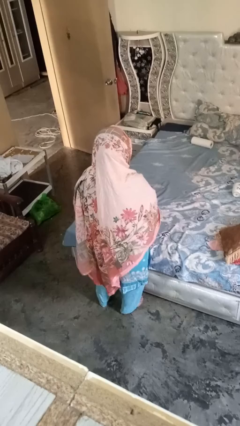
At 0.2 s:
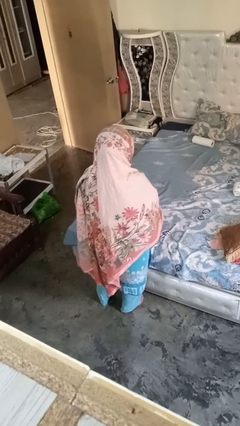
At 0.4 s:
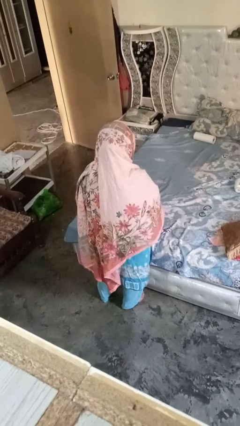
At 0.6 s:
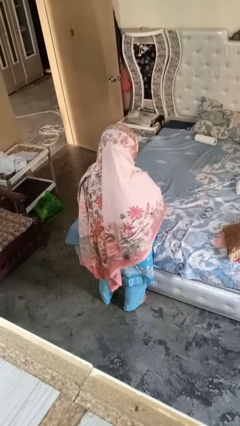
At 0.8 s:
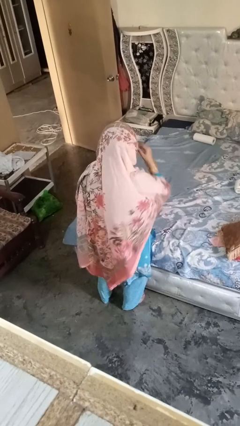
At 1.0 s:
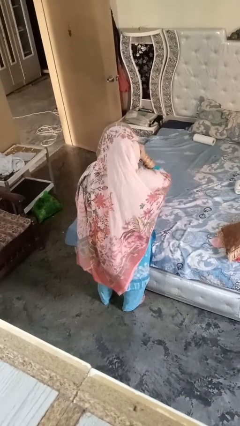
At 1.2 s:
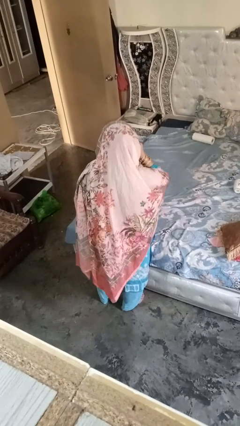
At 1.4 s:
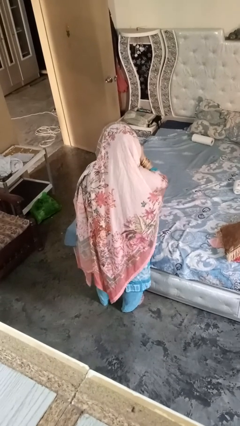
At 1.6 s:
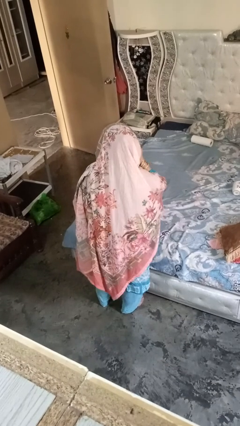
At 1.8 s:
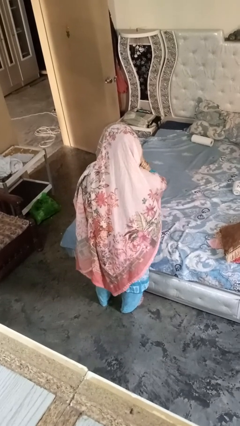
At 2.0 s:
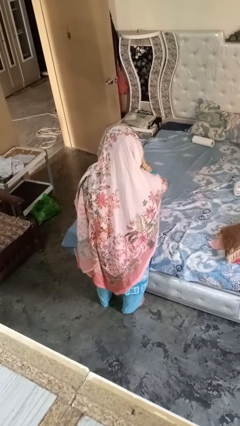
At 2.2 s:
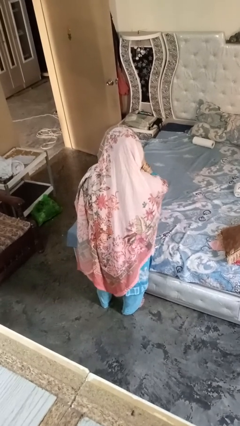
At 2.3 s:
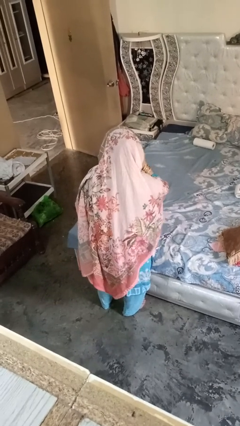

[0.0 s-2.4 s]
person gestures listen closely

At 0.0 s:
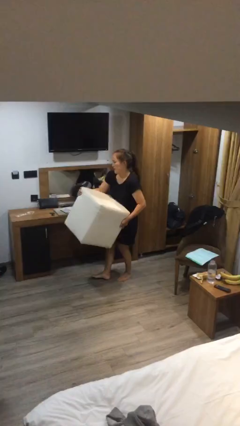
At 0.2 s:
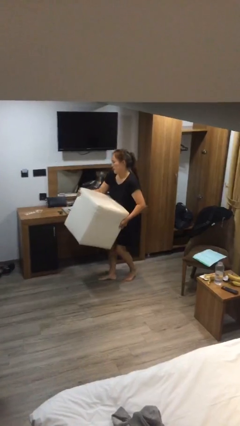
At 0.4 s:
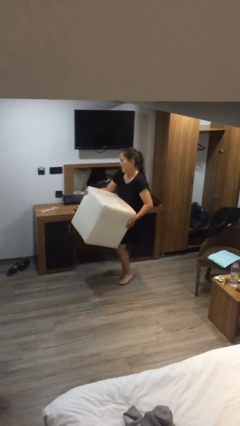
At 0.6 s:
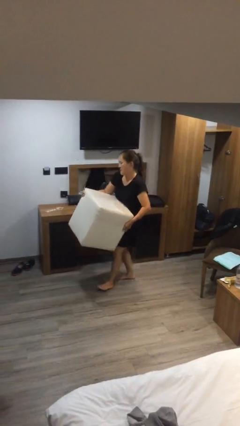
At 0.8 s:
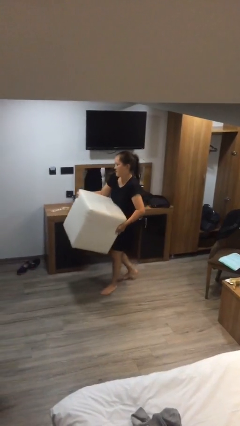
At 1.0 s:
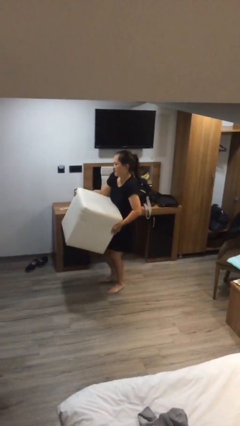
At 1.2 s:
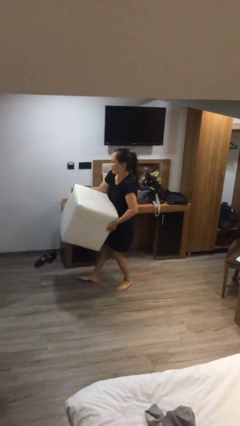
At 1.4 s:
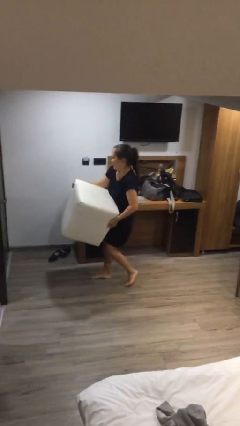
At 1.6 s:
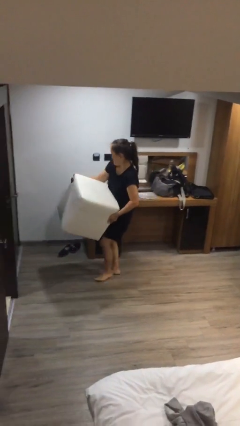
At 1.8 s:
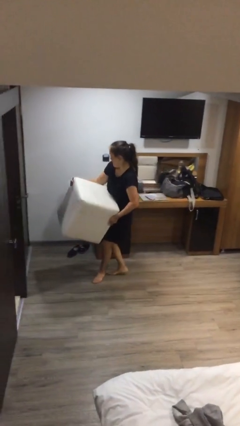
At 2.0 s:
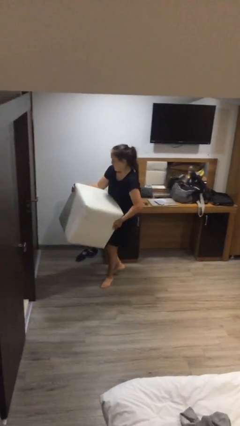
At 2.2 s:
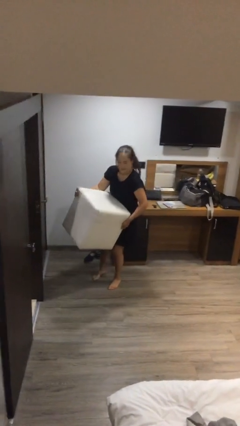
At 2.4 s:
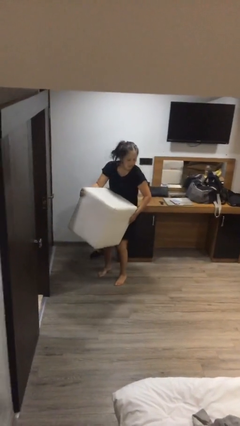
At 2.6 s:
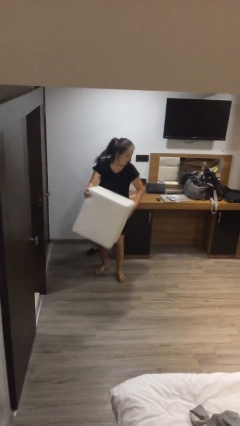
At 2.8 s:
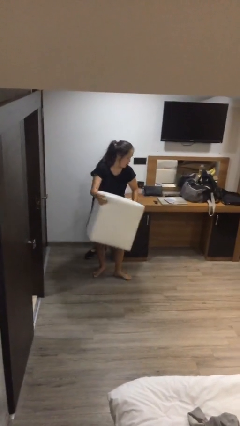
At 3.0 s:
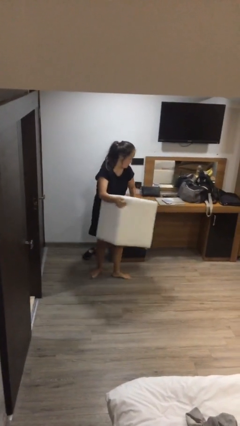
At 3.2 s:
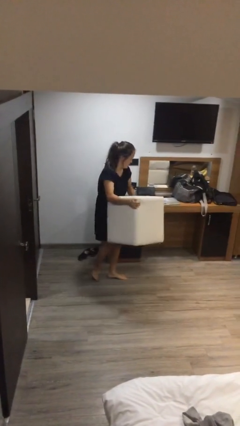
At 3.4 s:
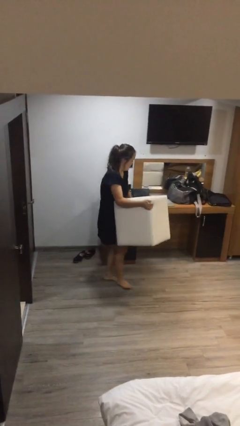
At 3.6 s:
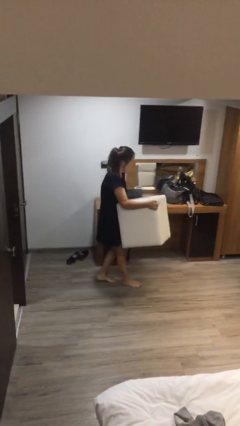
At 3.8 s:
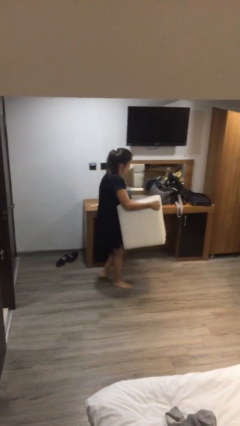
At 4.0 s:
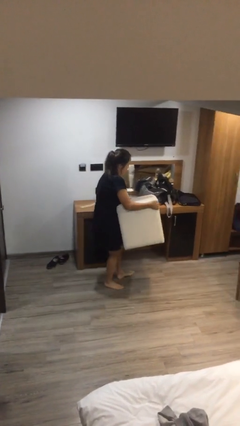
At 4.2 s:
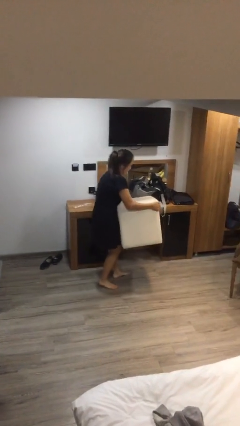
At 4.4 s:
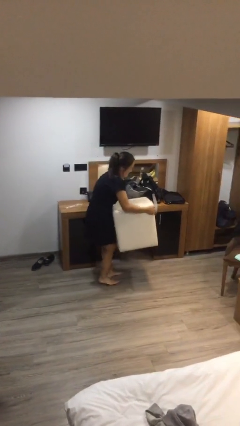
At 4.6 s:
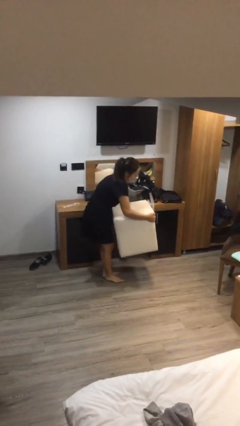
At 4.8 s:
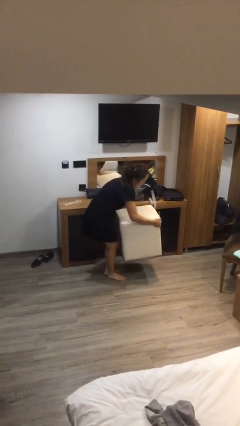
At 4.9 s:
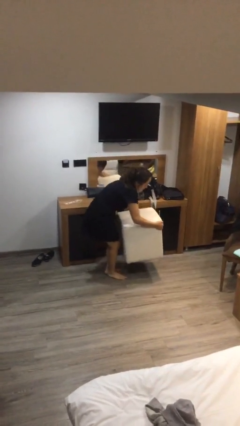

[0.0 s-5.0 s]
person carries heavy object

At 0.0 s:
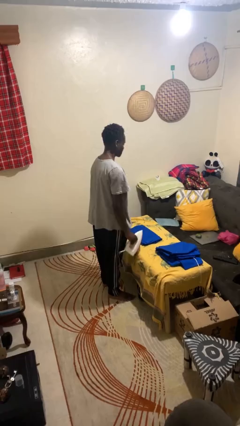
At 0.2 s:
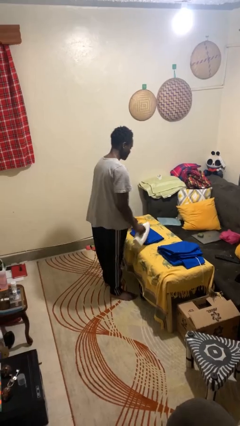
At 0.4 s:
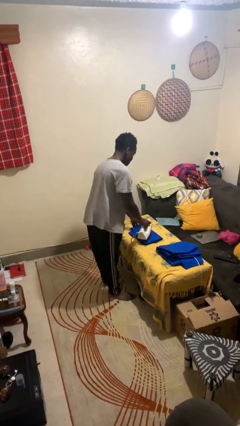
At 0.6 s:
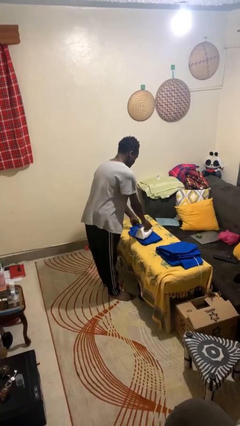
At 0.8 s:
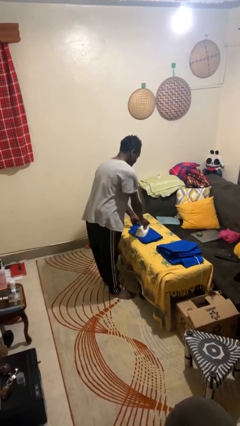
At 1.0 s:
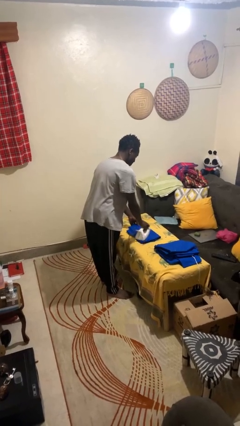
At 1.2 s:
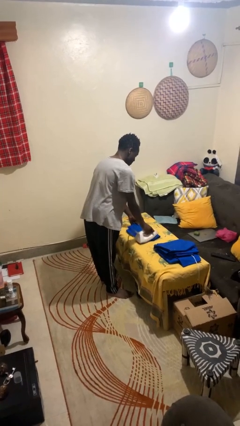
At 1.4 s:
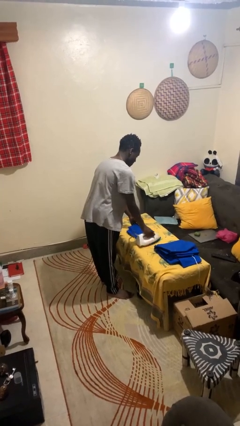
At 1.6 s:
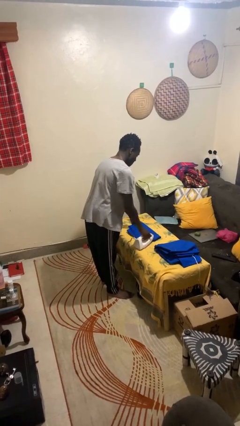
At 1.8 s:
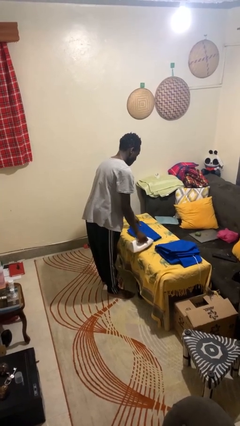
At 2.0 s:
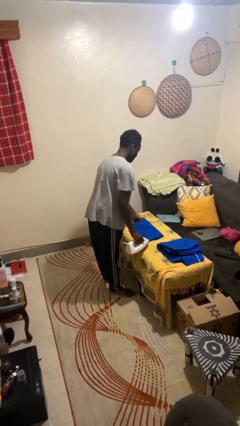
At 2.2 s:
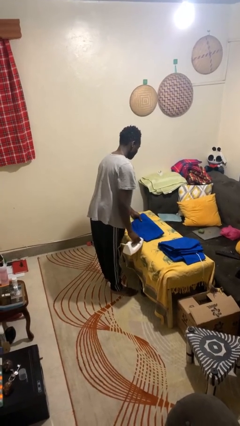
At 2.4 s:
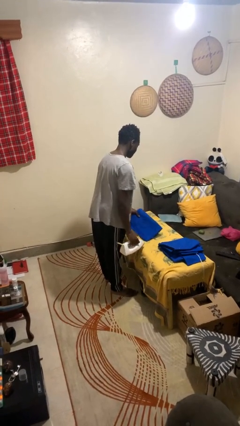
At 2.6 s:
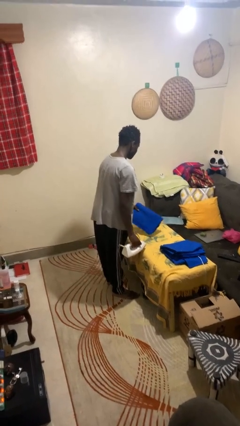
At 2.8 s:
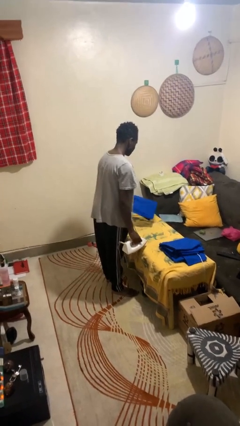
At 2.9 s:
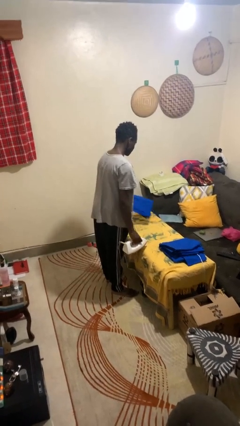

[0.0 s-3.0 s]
person irons clothes

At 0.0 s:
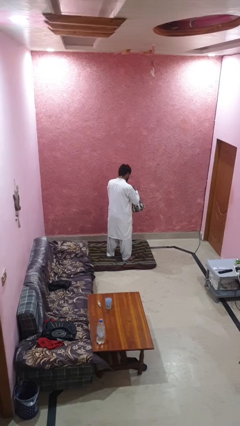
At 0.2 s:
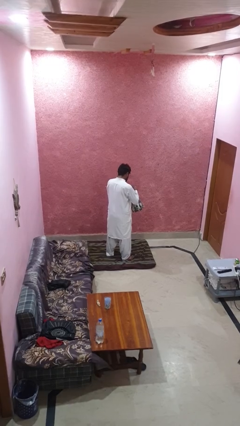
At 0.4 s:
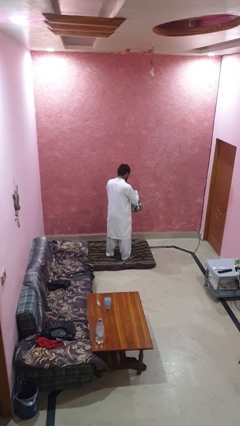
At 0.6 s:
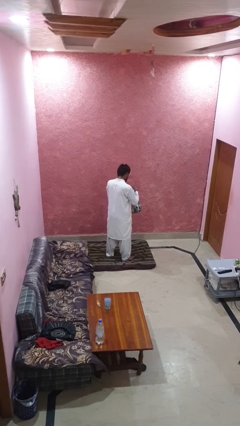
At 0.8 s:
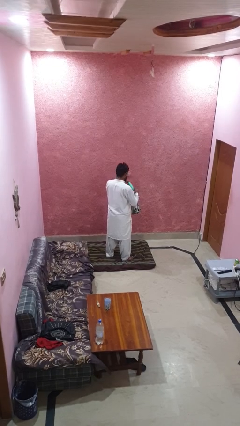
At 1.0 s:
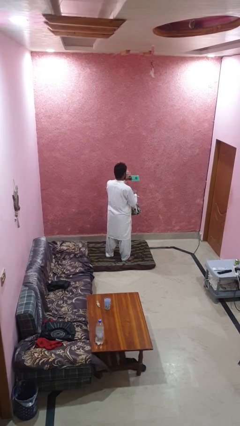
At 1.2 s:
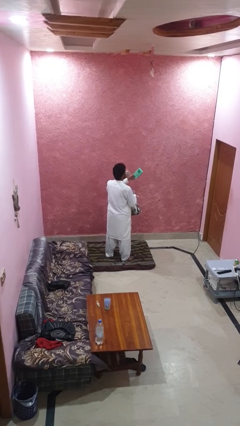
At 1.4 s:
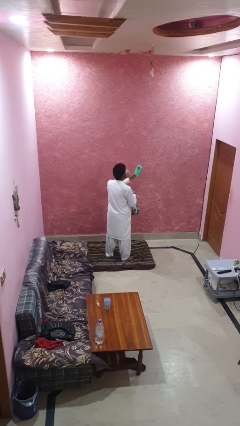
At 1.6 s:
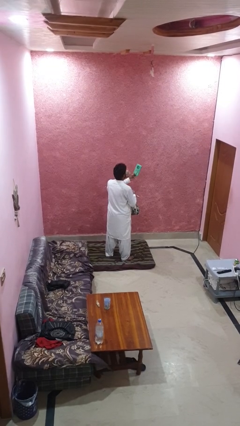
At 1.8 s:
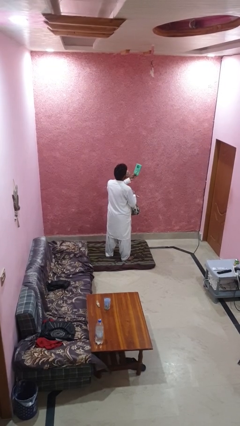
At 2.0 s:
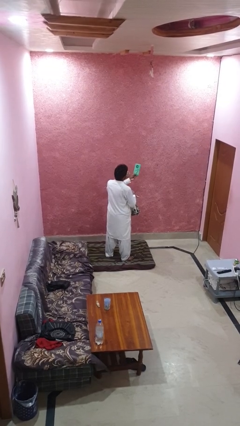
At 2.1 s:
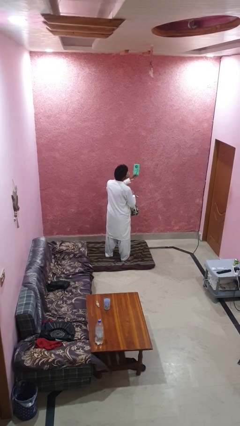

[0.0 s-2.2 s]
person takes object from backpack

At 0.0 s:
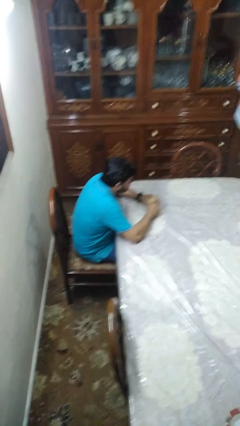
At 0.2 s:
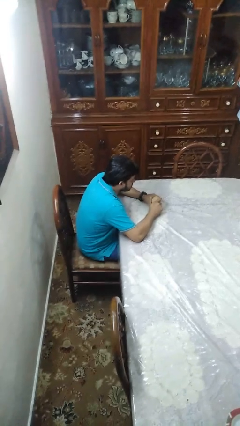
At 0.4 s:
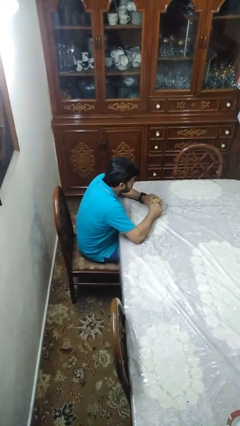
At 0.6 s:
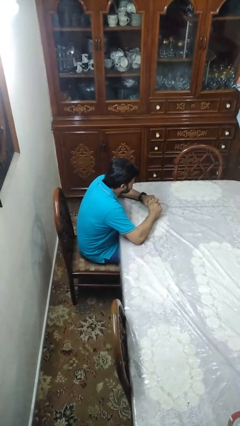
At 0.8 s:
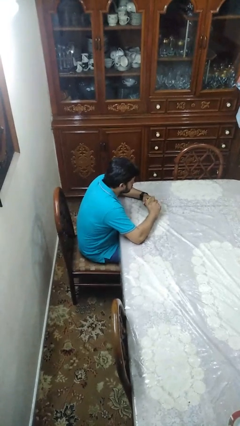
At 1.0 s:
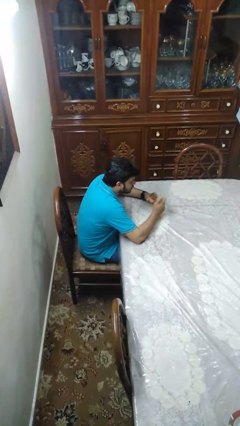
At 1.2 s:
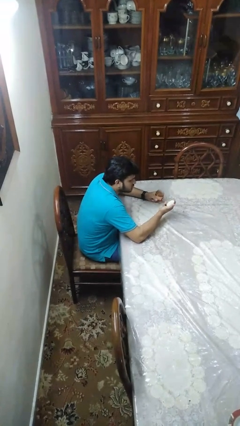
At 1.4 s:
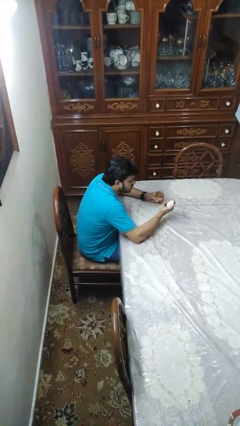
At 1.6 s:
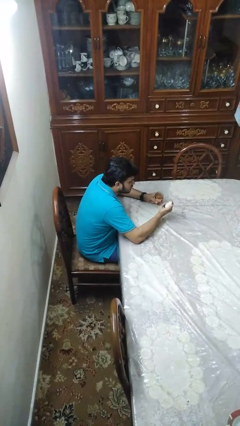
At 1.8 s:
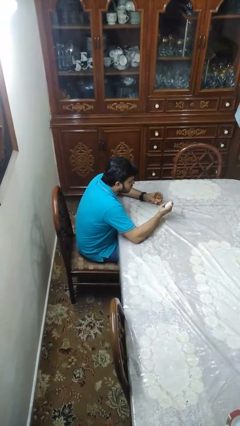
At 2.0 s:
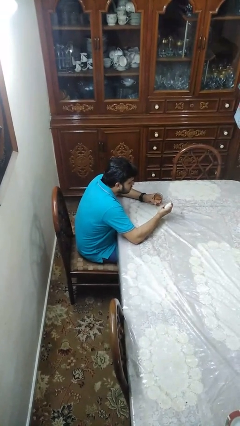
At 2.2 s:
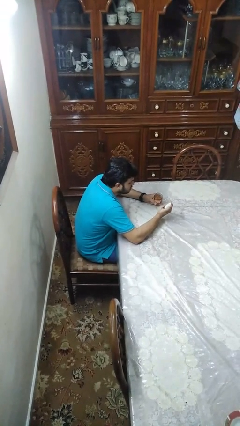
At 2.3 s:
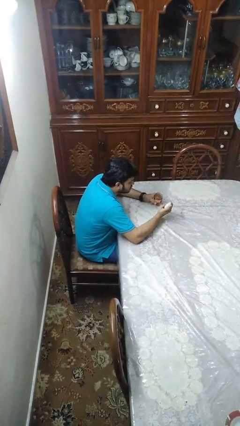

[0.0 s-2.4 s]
person opens jar

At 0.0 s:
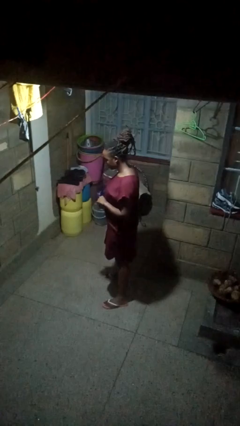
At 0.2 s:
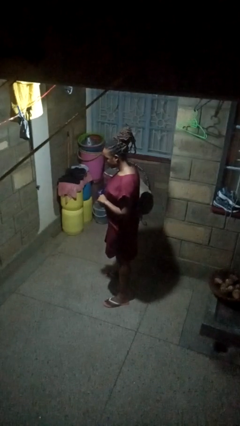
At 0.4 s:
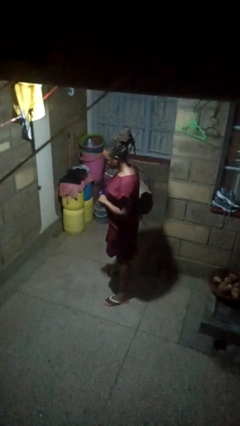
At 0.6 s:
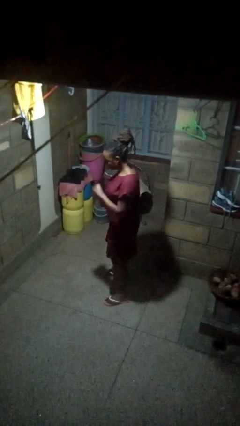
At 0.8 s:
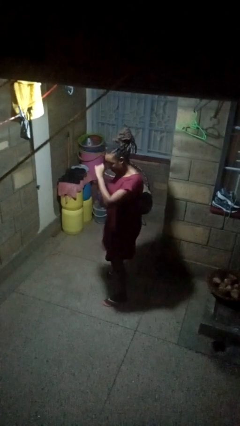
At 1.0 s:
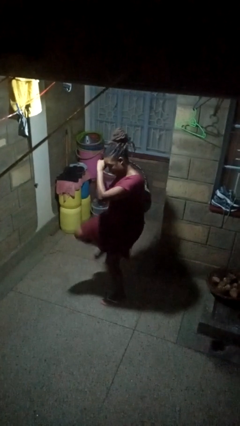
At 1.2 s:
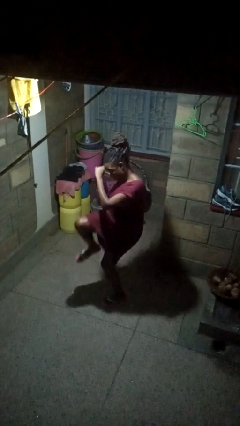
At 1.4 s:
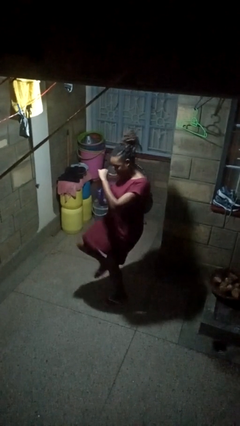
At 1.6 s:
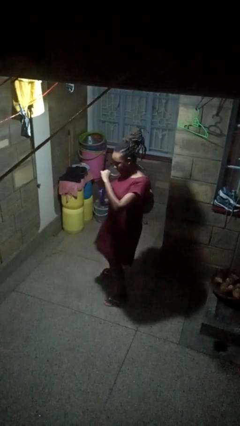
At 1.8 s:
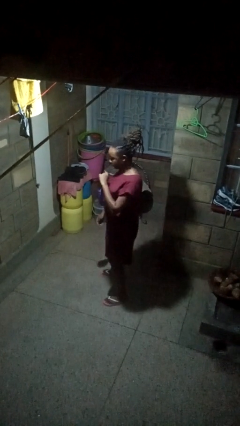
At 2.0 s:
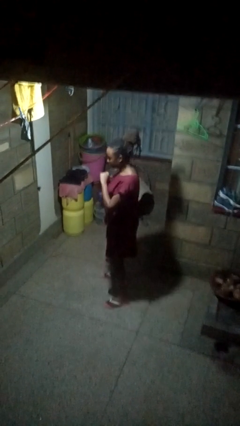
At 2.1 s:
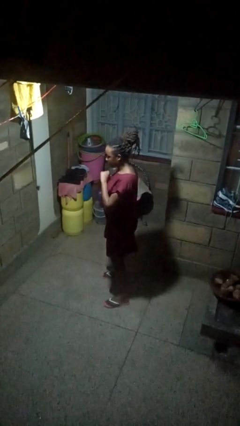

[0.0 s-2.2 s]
person karate kicks

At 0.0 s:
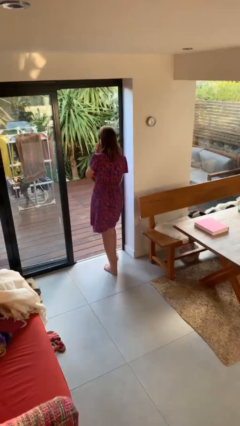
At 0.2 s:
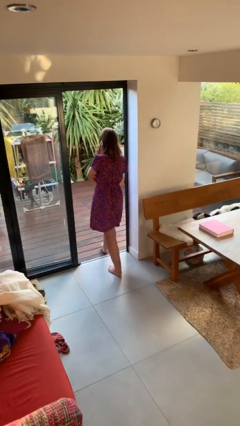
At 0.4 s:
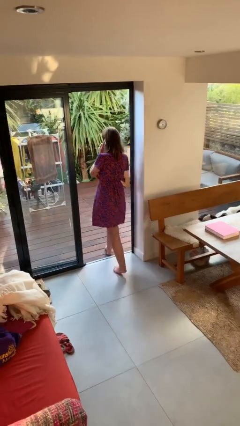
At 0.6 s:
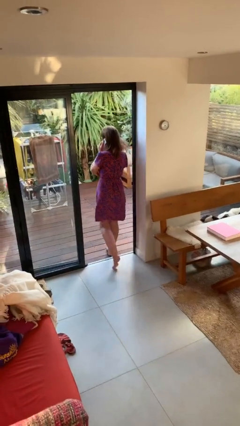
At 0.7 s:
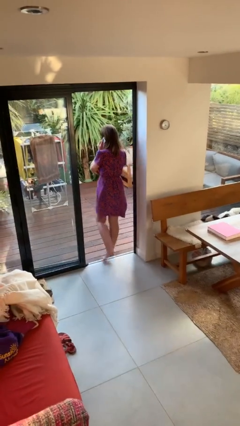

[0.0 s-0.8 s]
person exits scene through structure
